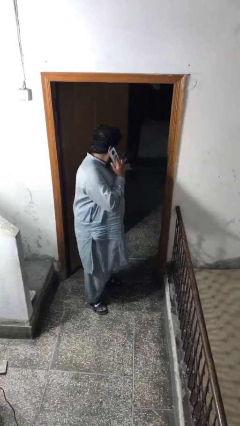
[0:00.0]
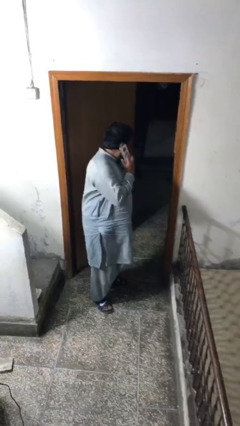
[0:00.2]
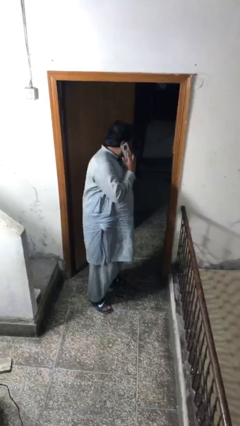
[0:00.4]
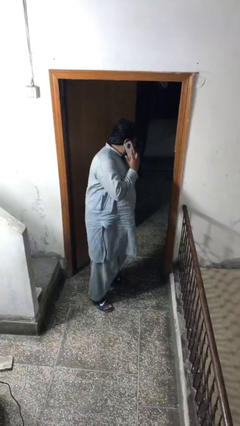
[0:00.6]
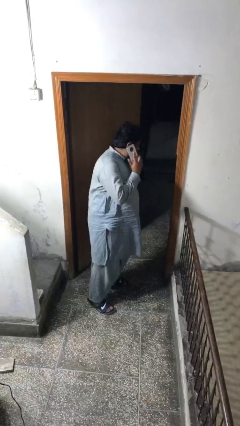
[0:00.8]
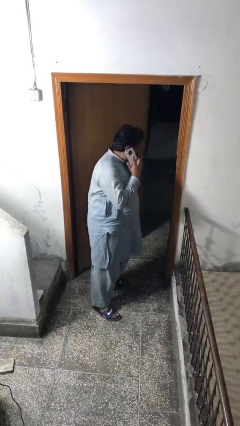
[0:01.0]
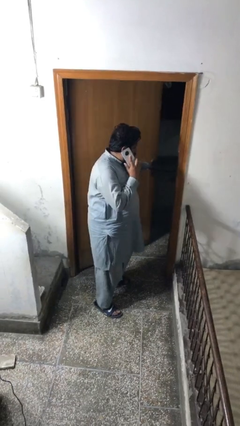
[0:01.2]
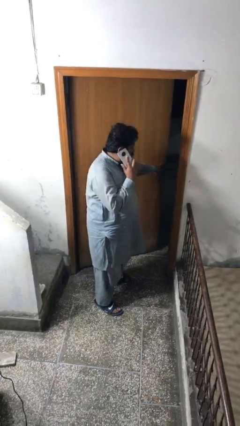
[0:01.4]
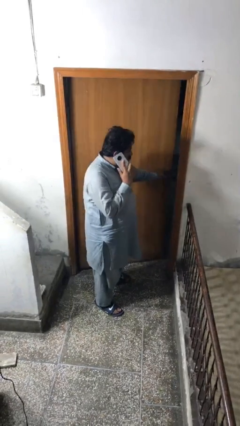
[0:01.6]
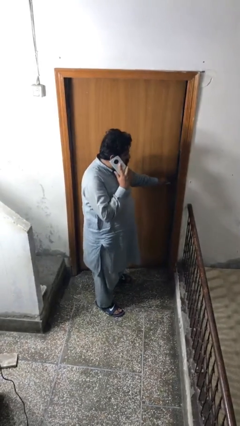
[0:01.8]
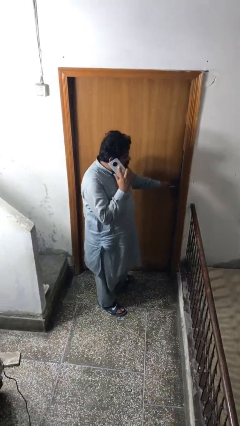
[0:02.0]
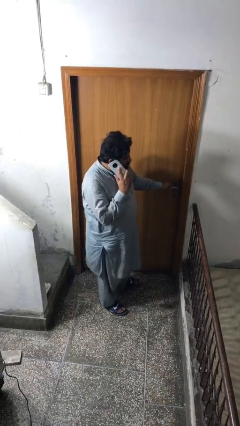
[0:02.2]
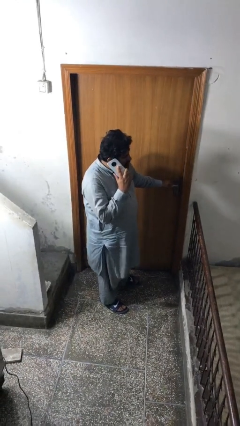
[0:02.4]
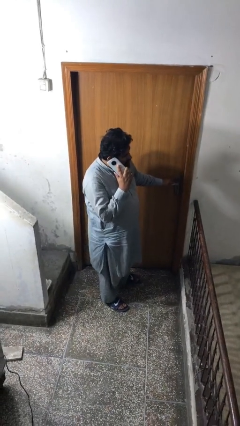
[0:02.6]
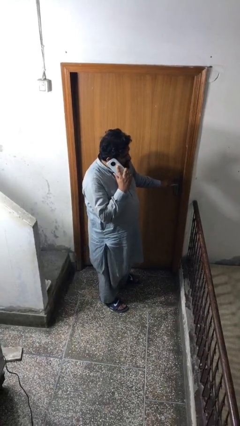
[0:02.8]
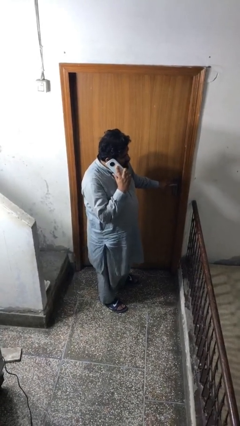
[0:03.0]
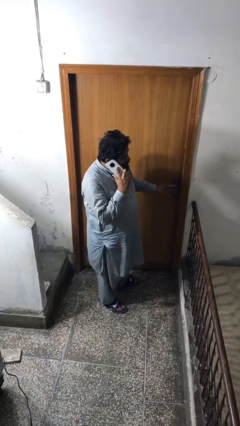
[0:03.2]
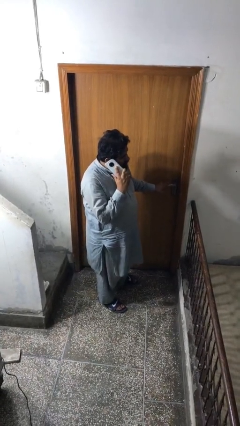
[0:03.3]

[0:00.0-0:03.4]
person closes facility door

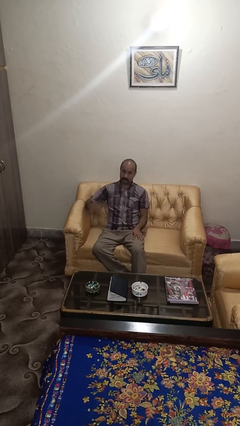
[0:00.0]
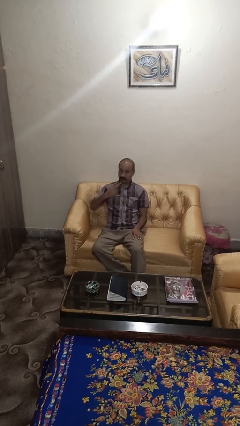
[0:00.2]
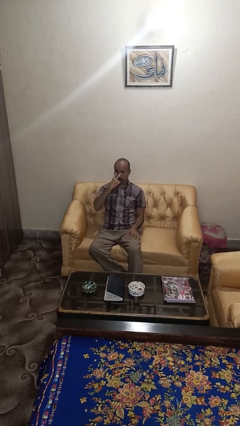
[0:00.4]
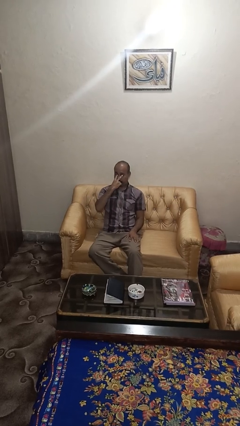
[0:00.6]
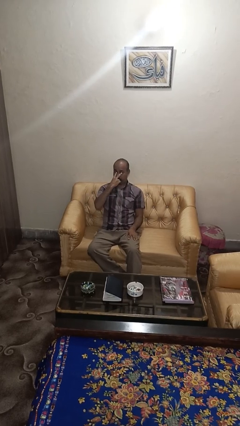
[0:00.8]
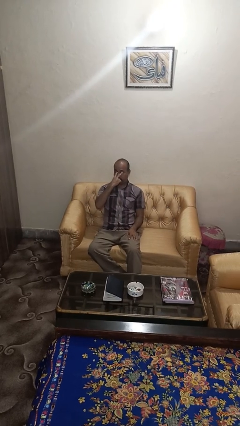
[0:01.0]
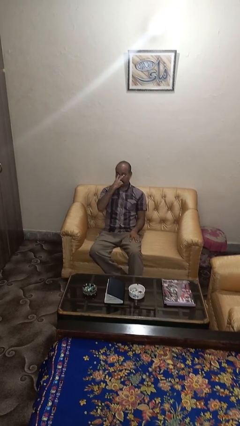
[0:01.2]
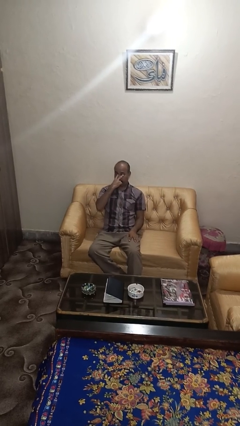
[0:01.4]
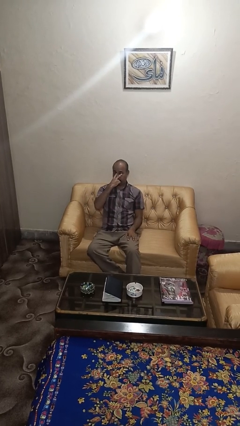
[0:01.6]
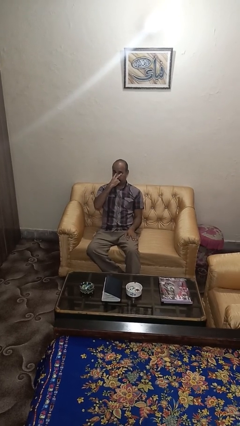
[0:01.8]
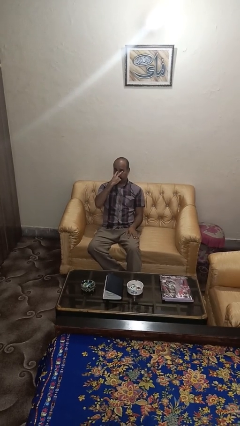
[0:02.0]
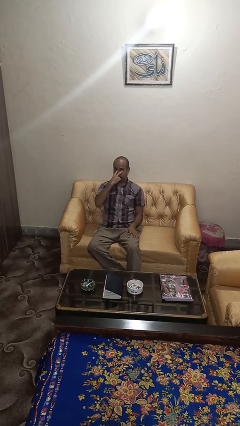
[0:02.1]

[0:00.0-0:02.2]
person gestures watch closely

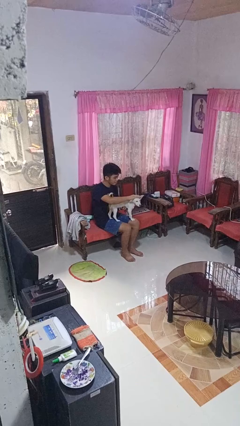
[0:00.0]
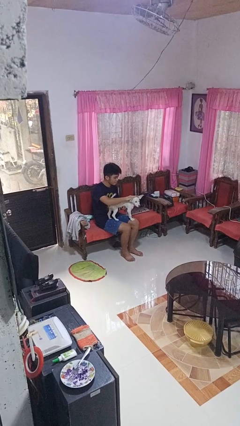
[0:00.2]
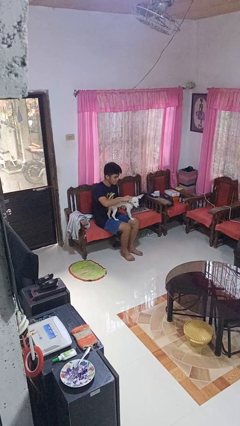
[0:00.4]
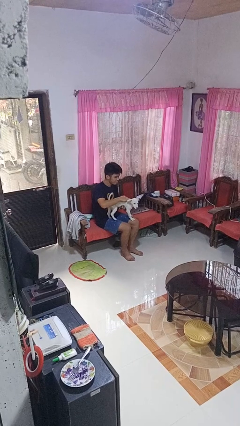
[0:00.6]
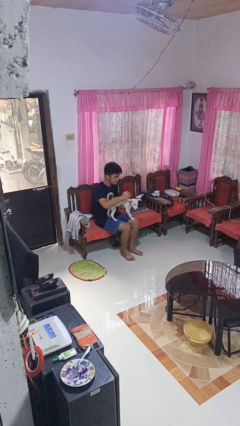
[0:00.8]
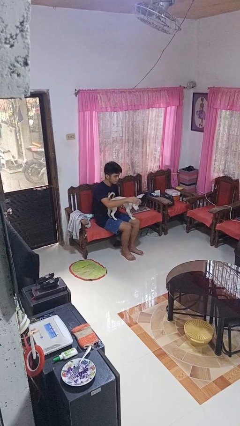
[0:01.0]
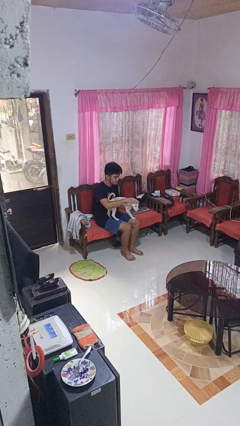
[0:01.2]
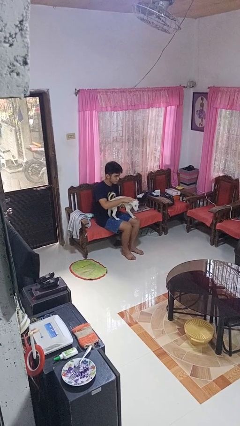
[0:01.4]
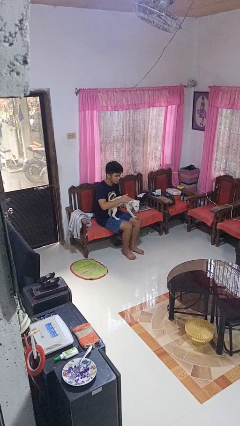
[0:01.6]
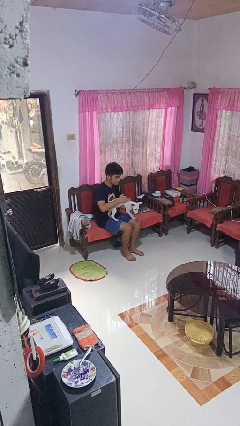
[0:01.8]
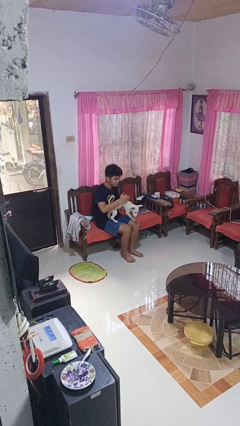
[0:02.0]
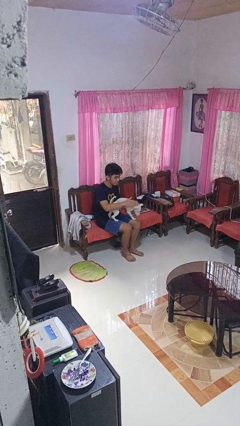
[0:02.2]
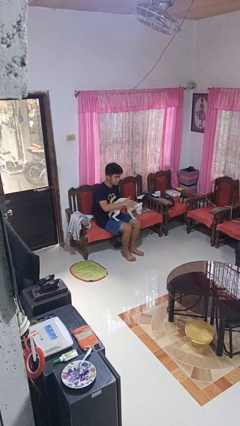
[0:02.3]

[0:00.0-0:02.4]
person pets dog

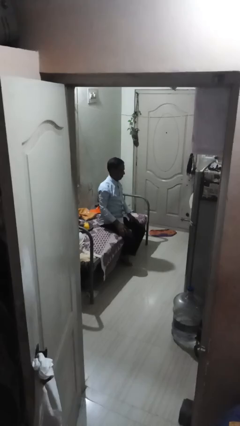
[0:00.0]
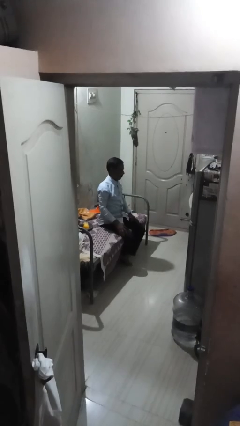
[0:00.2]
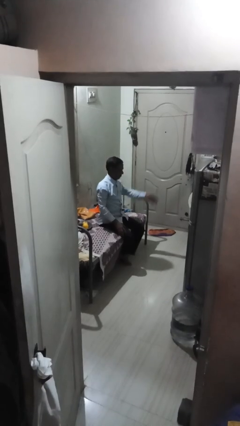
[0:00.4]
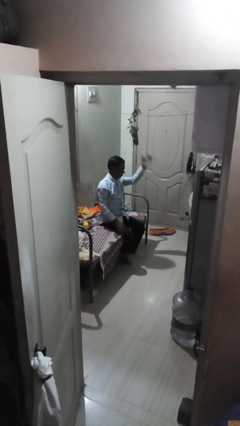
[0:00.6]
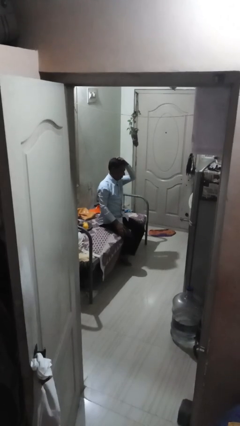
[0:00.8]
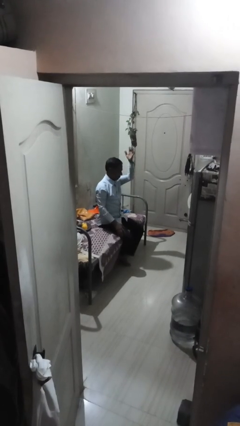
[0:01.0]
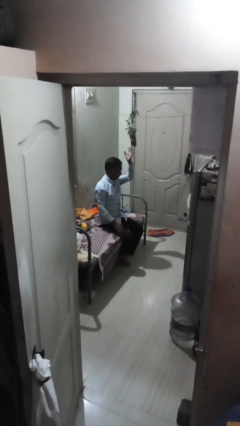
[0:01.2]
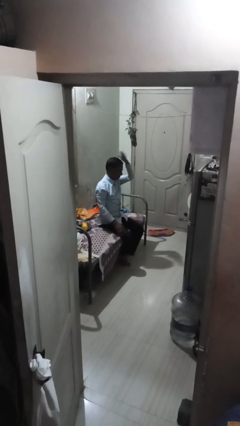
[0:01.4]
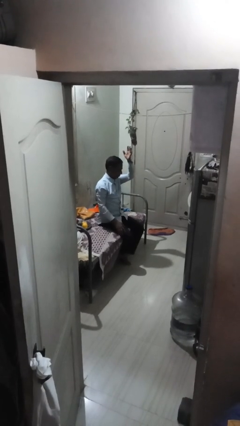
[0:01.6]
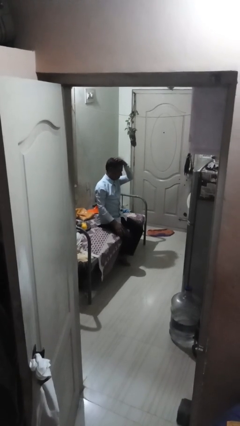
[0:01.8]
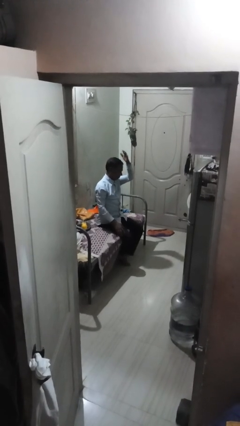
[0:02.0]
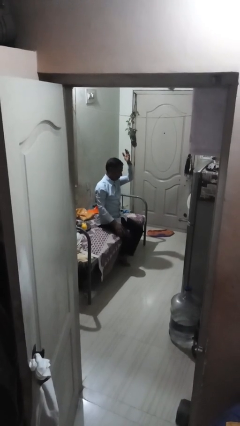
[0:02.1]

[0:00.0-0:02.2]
person pats head

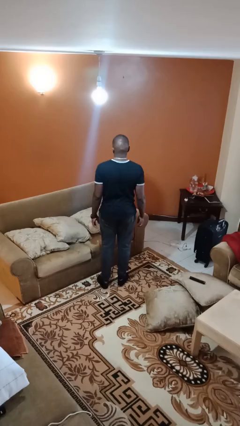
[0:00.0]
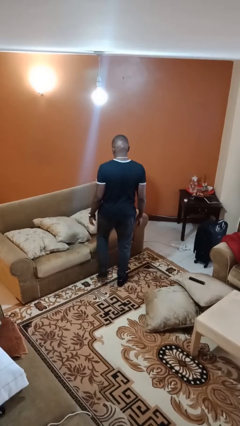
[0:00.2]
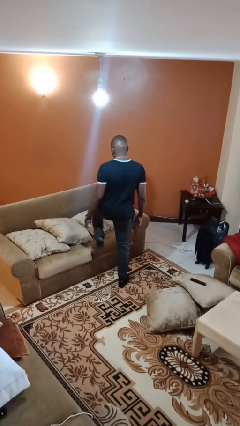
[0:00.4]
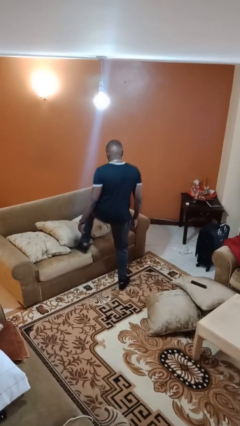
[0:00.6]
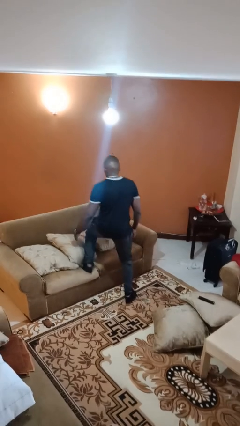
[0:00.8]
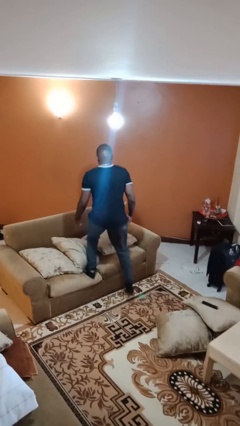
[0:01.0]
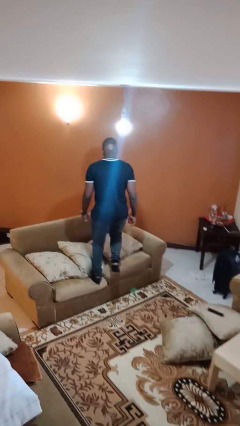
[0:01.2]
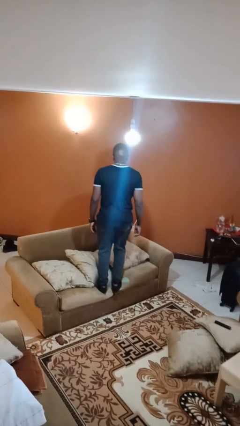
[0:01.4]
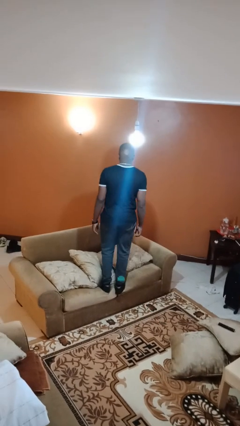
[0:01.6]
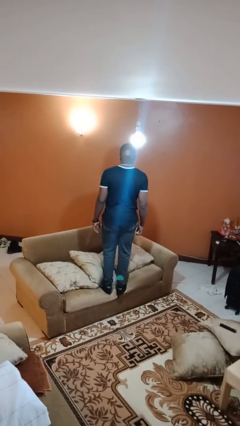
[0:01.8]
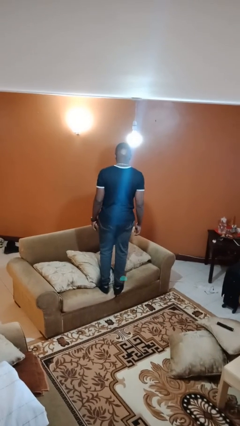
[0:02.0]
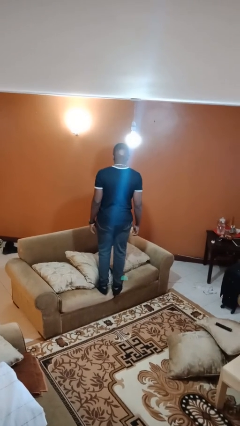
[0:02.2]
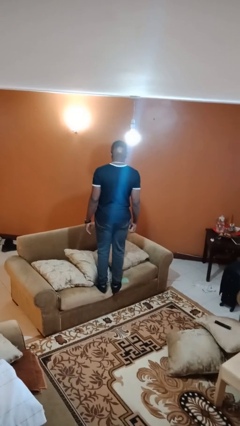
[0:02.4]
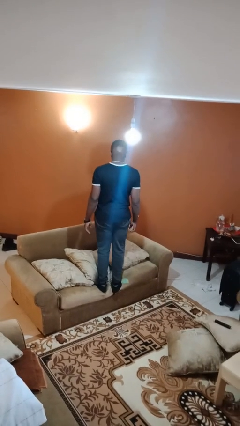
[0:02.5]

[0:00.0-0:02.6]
person climbs on couch

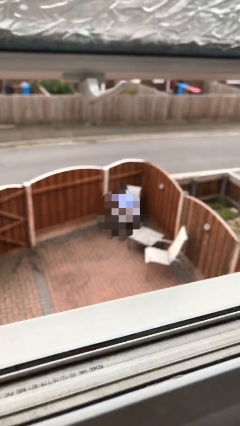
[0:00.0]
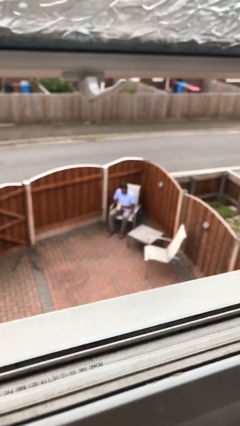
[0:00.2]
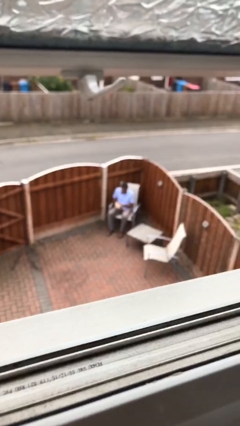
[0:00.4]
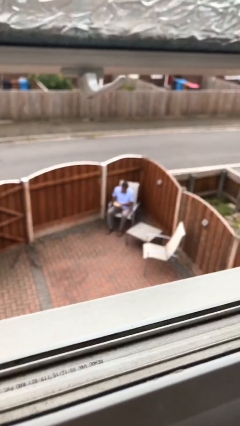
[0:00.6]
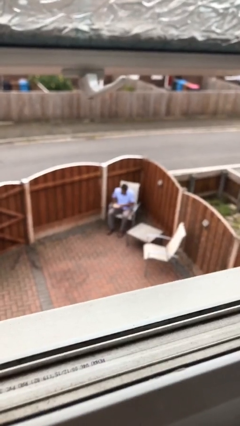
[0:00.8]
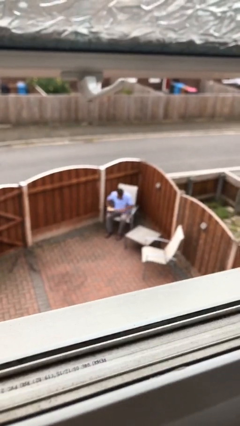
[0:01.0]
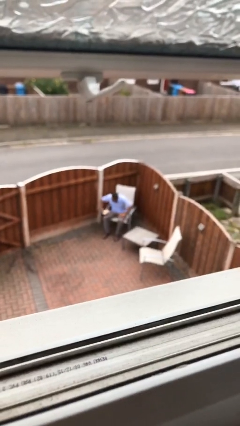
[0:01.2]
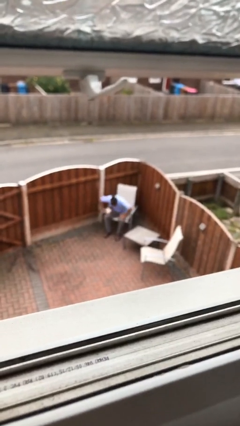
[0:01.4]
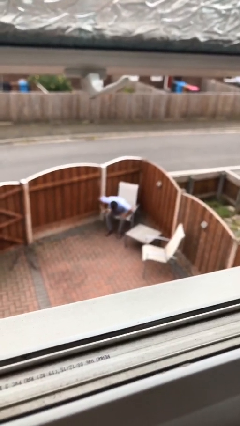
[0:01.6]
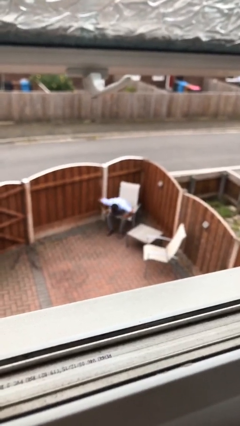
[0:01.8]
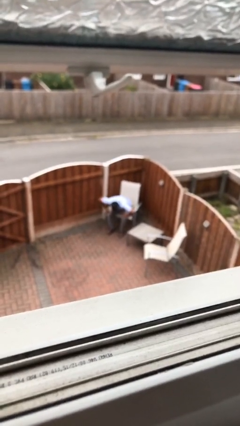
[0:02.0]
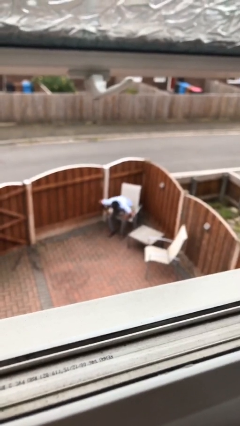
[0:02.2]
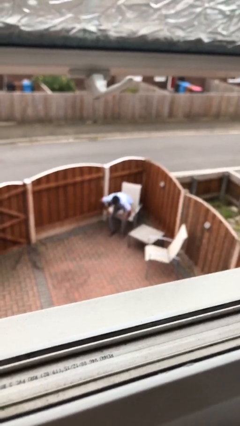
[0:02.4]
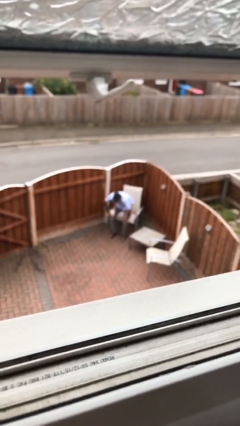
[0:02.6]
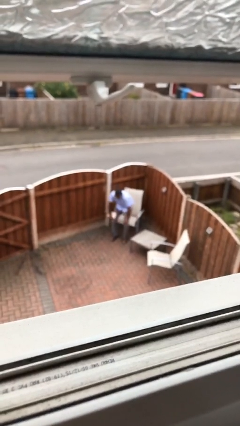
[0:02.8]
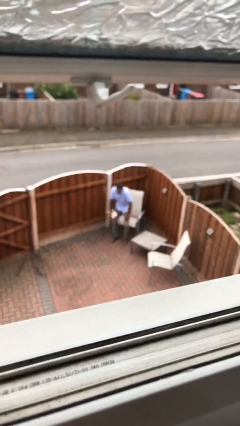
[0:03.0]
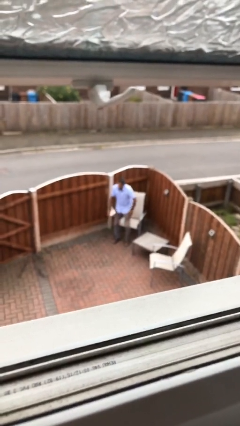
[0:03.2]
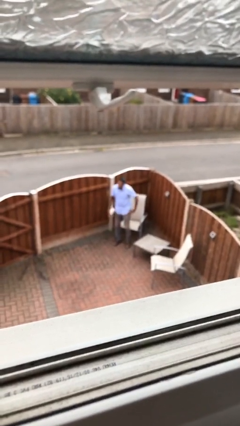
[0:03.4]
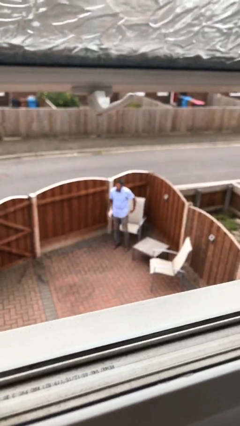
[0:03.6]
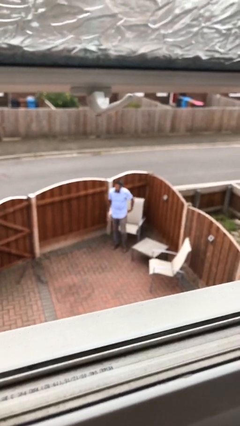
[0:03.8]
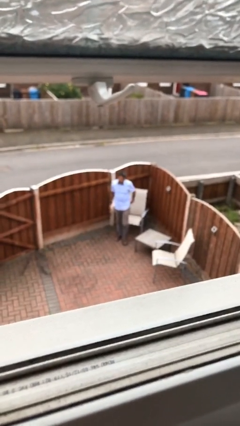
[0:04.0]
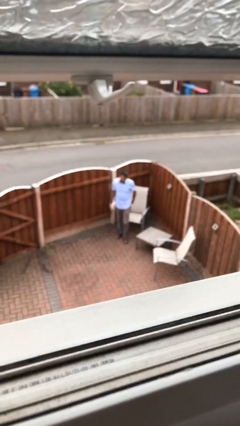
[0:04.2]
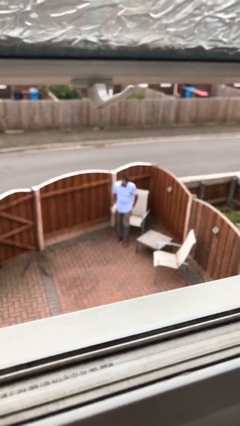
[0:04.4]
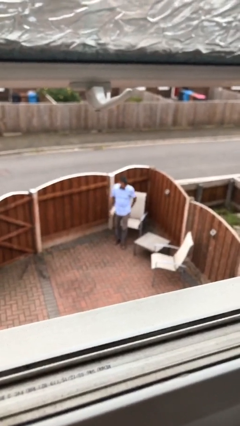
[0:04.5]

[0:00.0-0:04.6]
person stands up
